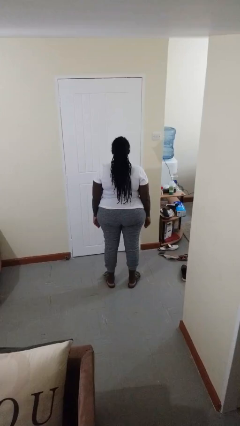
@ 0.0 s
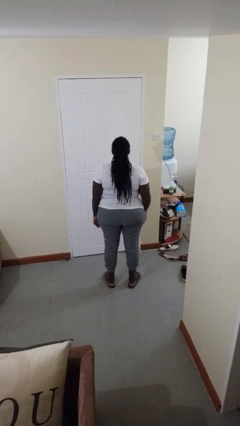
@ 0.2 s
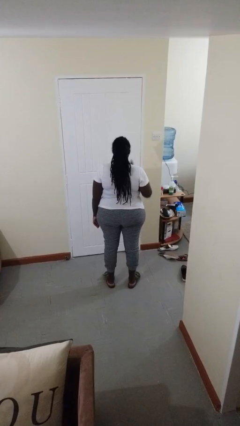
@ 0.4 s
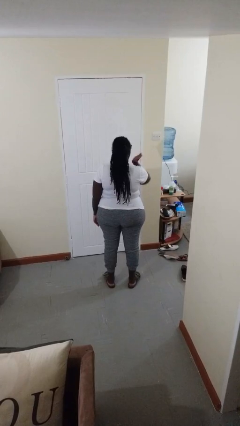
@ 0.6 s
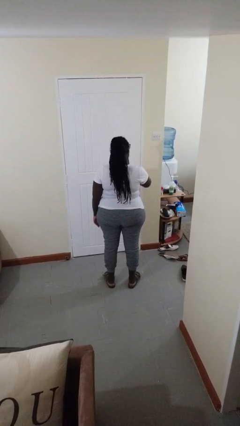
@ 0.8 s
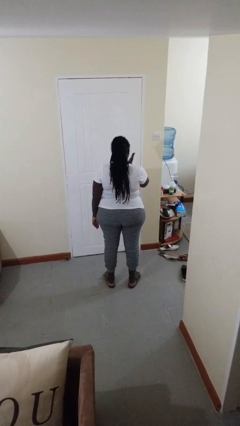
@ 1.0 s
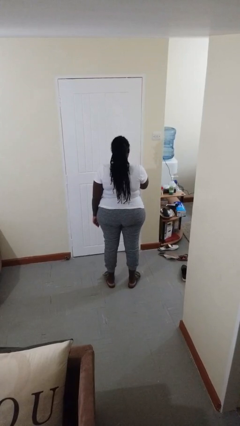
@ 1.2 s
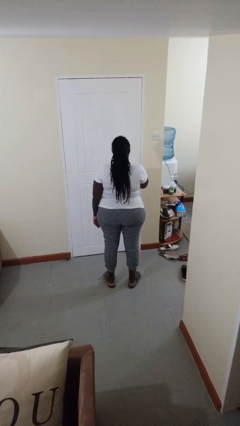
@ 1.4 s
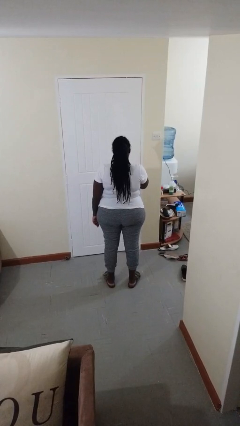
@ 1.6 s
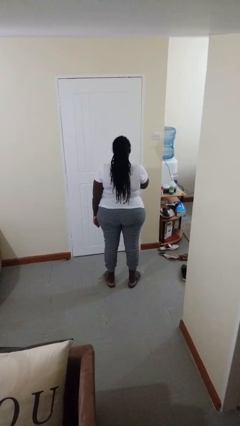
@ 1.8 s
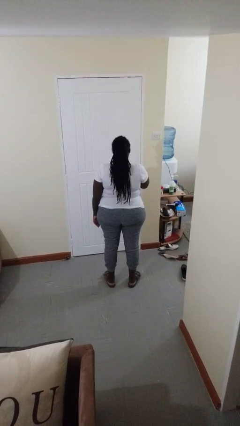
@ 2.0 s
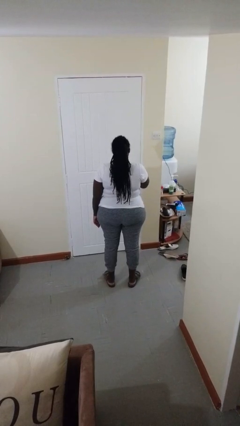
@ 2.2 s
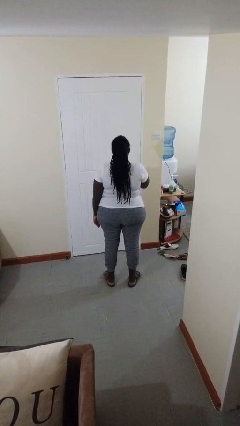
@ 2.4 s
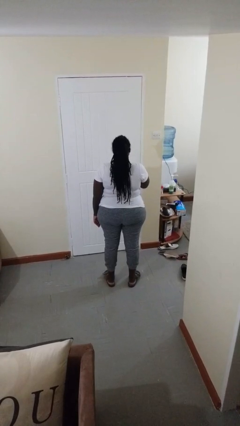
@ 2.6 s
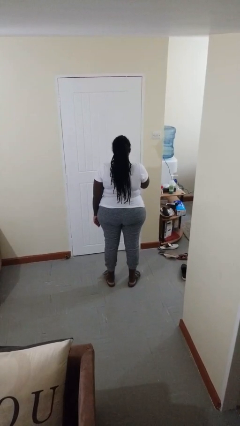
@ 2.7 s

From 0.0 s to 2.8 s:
person swats bug

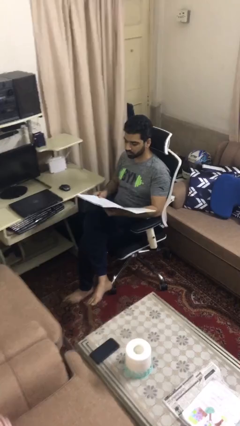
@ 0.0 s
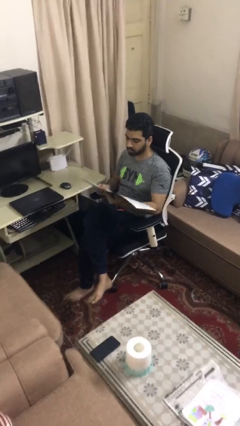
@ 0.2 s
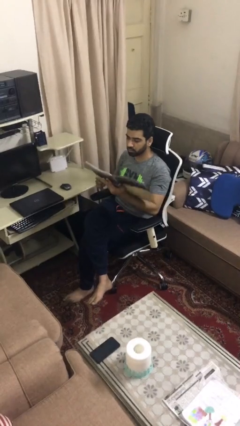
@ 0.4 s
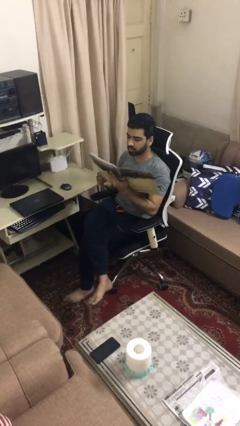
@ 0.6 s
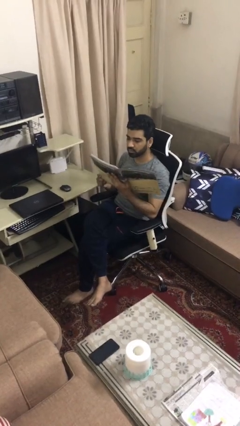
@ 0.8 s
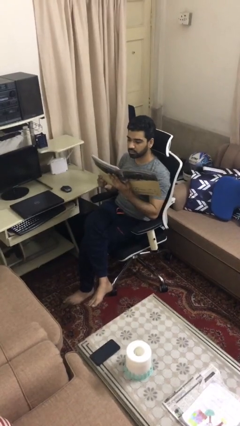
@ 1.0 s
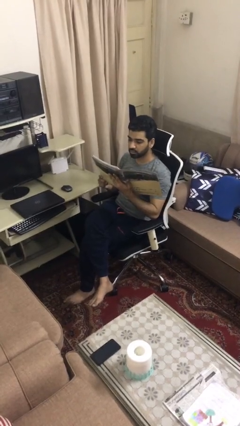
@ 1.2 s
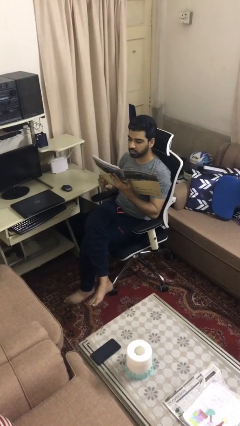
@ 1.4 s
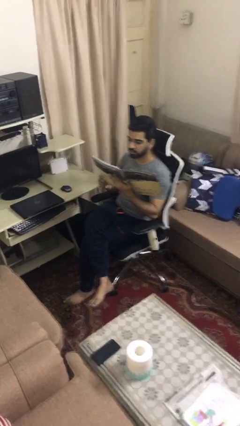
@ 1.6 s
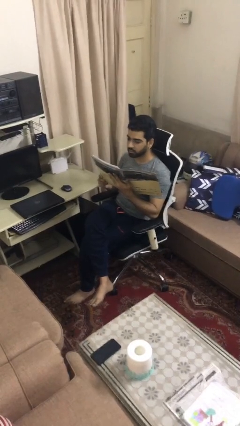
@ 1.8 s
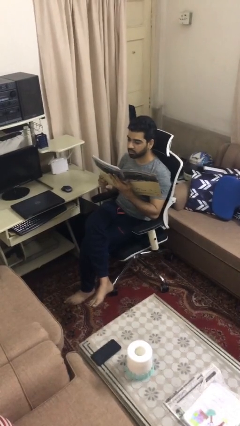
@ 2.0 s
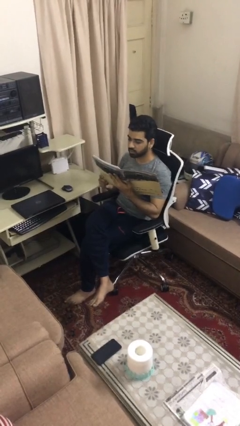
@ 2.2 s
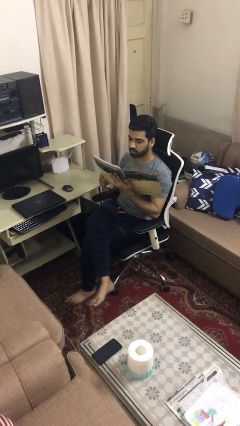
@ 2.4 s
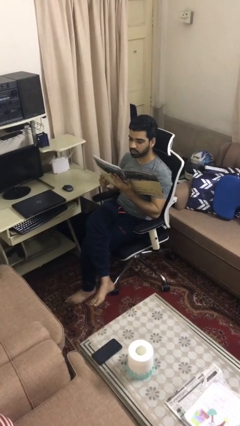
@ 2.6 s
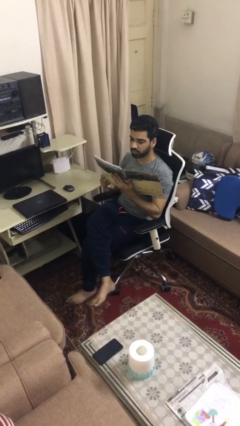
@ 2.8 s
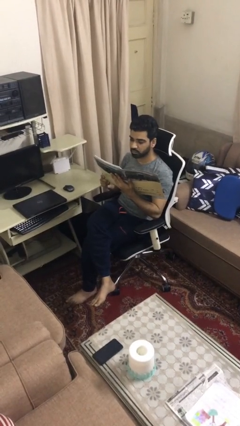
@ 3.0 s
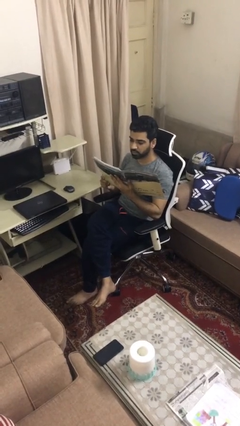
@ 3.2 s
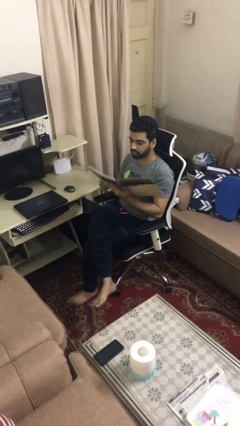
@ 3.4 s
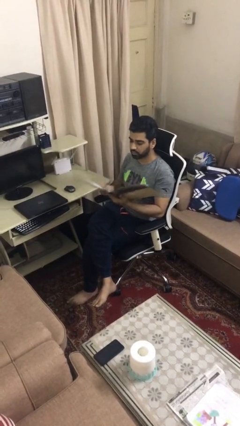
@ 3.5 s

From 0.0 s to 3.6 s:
person reads document

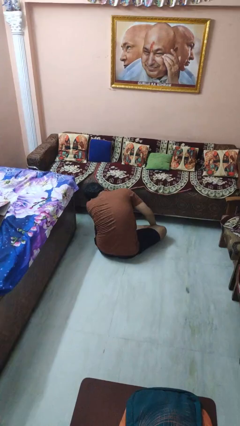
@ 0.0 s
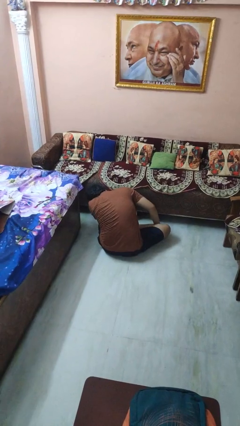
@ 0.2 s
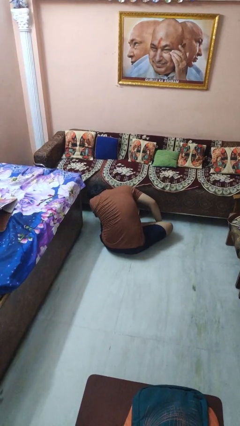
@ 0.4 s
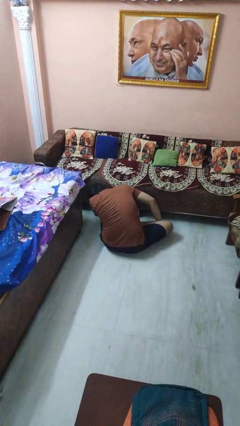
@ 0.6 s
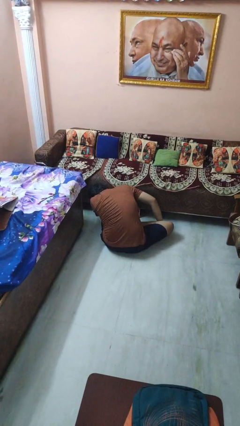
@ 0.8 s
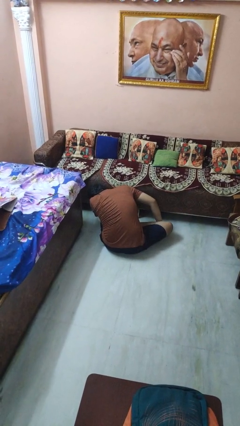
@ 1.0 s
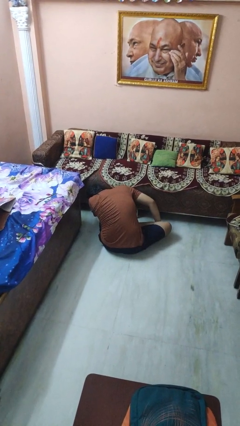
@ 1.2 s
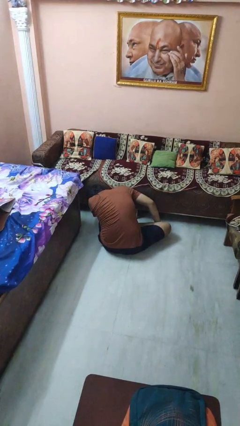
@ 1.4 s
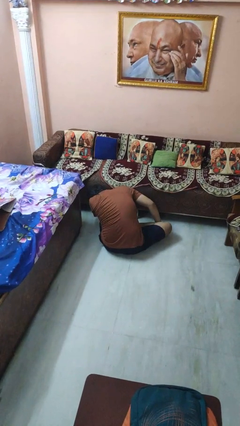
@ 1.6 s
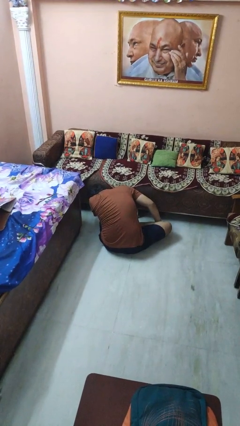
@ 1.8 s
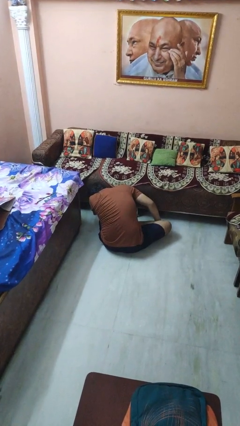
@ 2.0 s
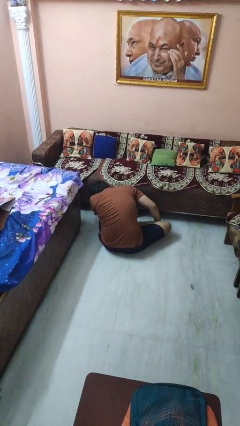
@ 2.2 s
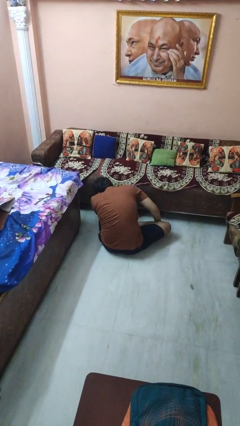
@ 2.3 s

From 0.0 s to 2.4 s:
person searches under couch

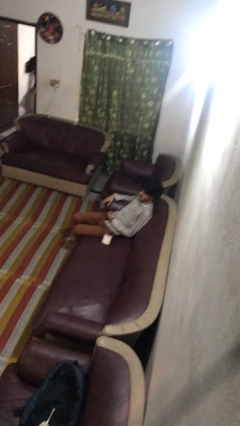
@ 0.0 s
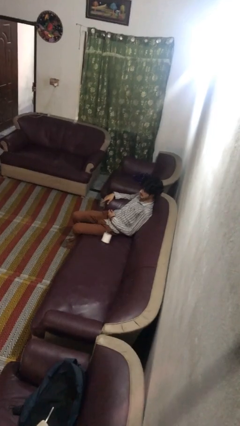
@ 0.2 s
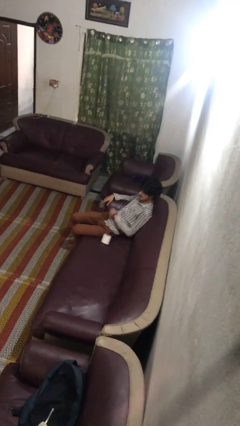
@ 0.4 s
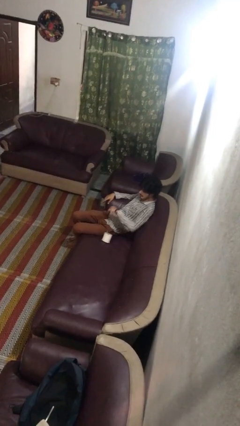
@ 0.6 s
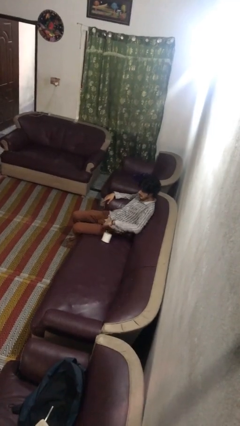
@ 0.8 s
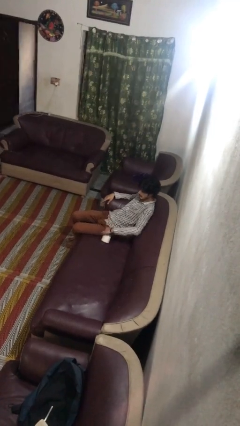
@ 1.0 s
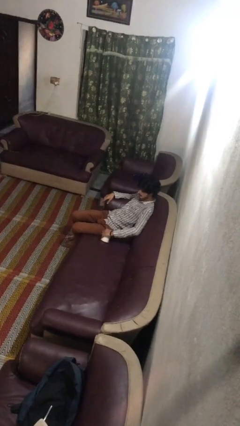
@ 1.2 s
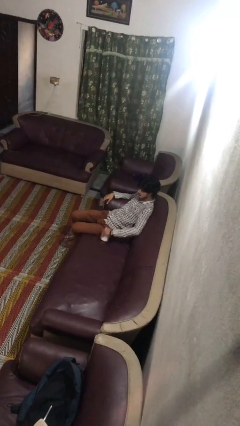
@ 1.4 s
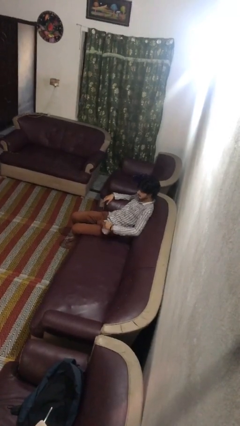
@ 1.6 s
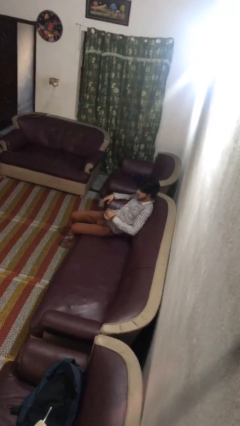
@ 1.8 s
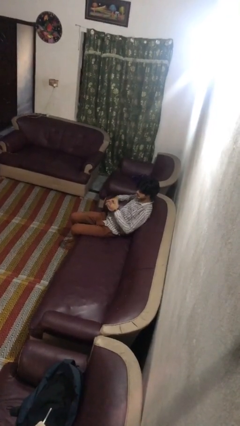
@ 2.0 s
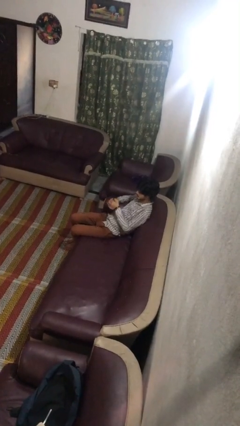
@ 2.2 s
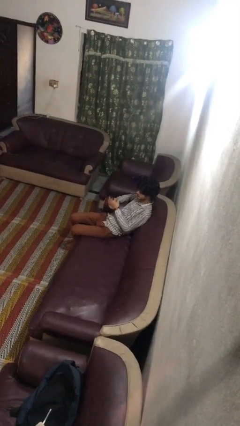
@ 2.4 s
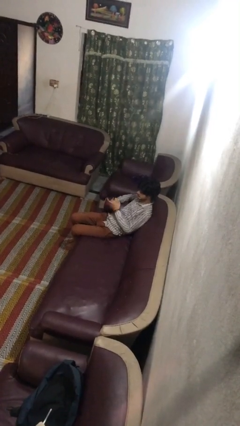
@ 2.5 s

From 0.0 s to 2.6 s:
person picks up object from couch

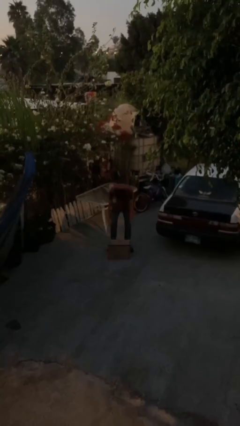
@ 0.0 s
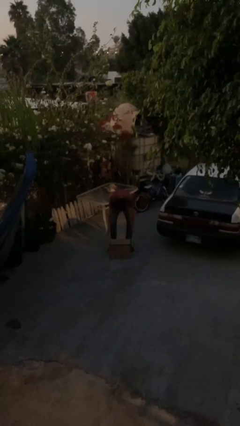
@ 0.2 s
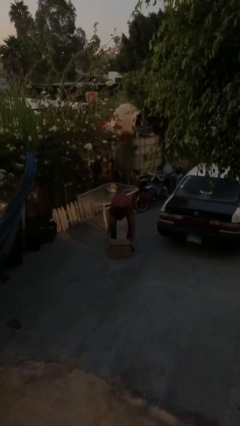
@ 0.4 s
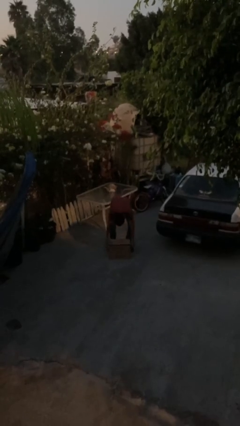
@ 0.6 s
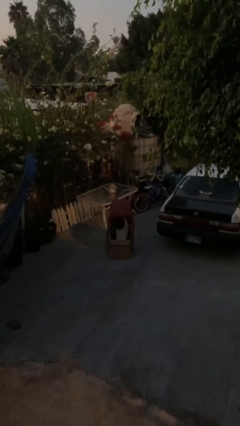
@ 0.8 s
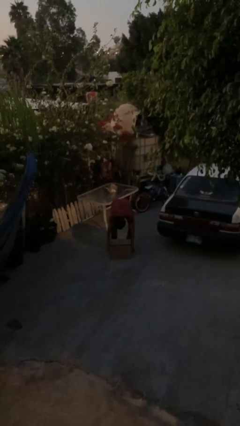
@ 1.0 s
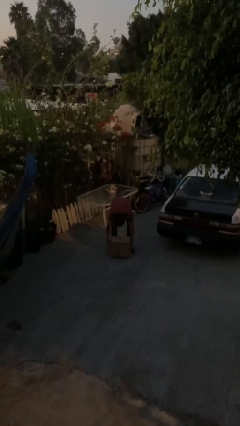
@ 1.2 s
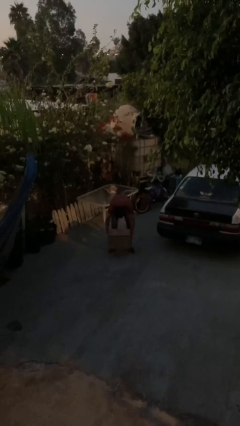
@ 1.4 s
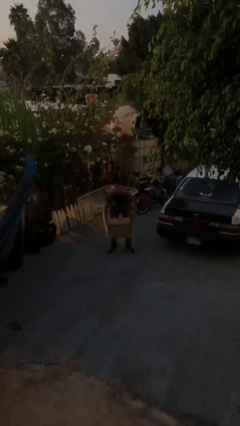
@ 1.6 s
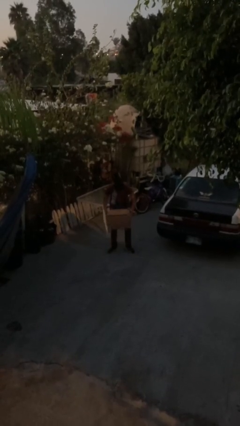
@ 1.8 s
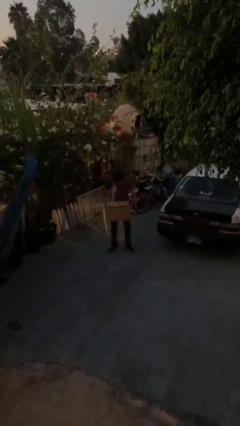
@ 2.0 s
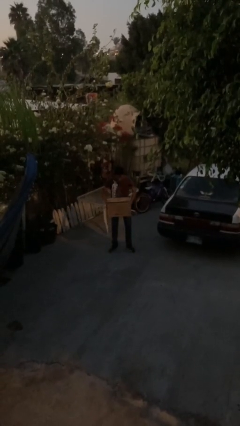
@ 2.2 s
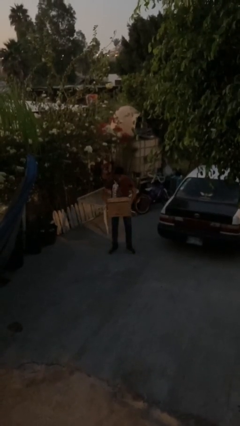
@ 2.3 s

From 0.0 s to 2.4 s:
person picks up object from floor

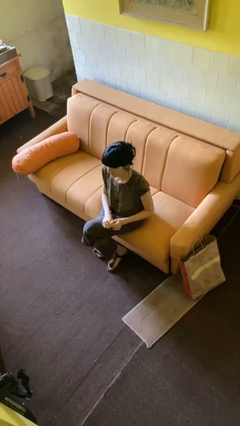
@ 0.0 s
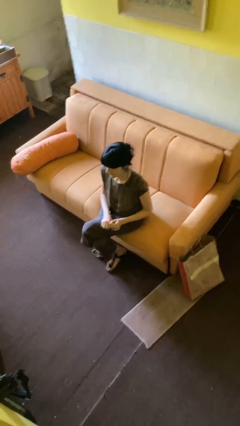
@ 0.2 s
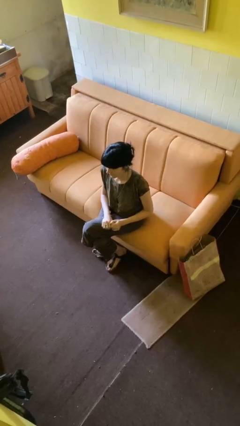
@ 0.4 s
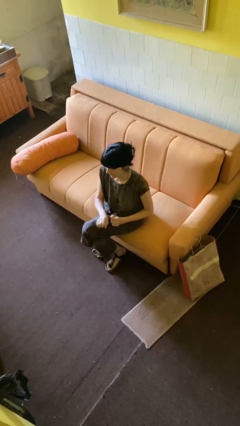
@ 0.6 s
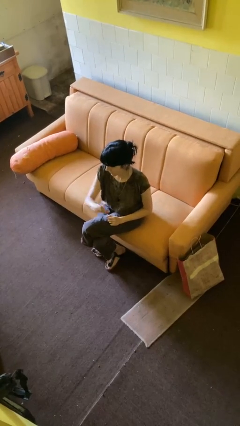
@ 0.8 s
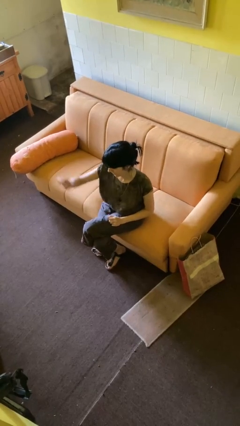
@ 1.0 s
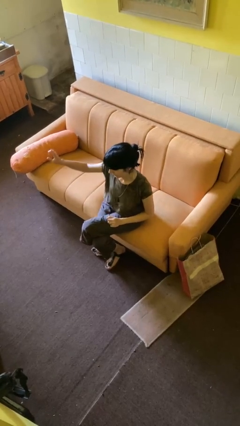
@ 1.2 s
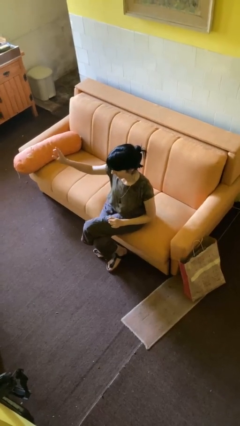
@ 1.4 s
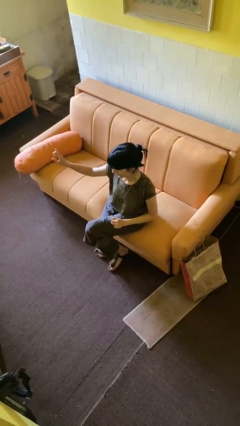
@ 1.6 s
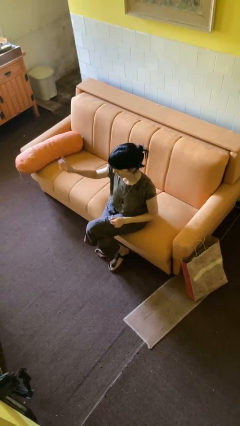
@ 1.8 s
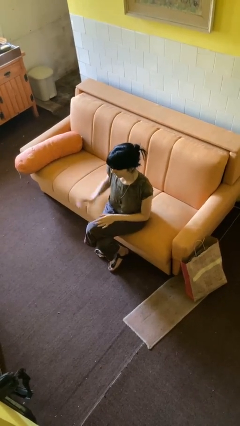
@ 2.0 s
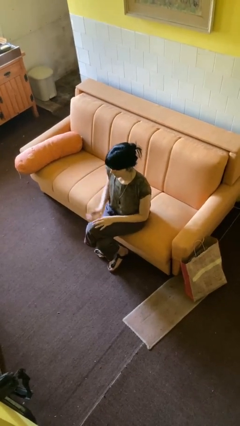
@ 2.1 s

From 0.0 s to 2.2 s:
person gestures swipe right

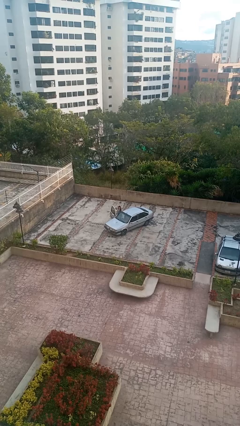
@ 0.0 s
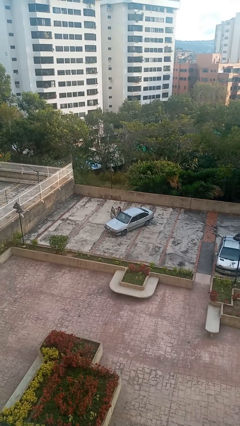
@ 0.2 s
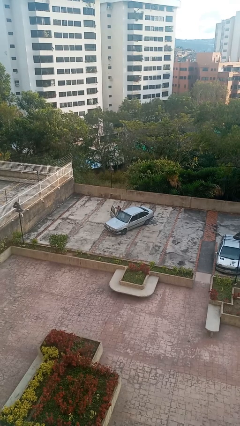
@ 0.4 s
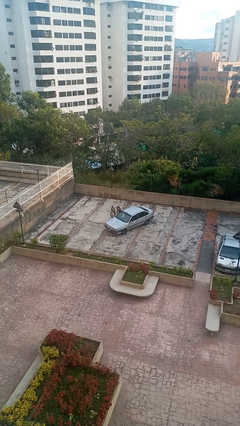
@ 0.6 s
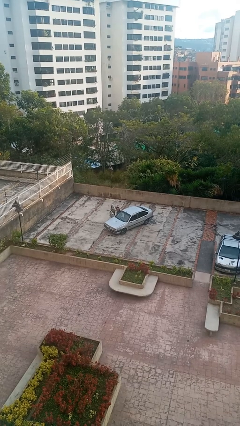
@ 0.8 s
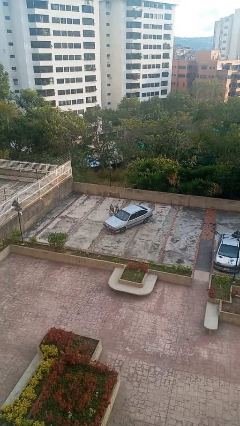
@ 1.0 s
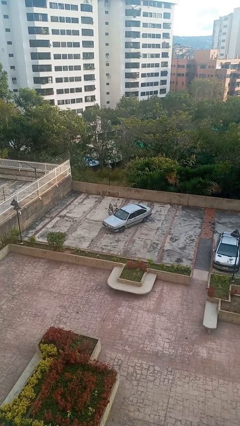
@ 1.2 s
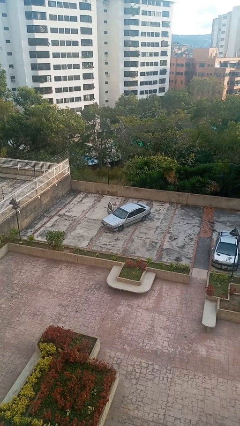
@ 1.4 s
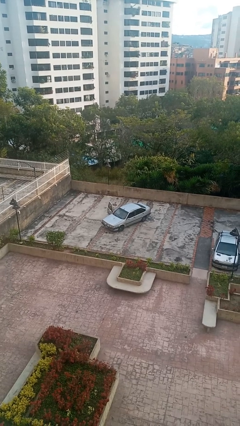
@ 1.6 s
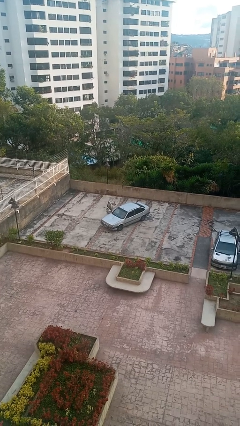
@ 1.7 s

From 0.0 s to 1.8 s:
person enters car
